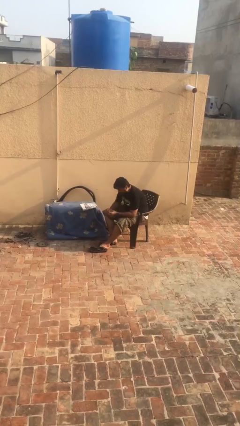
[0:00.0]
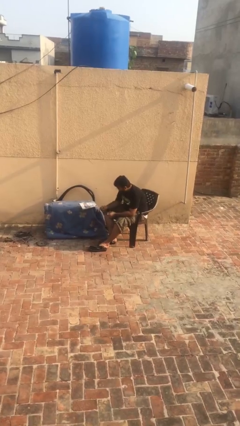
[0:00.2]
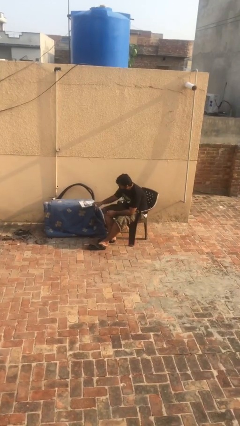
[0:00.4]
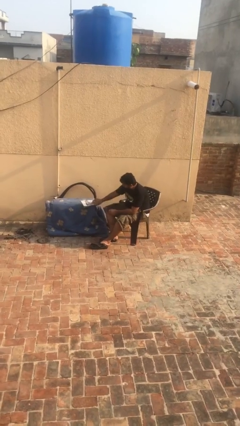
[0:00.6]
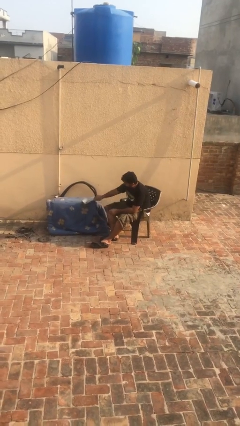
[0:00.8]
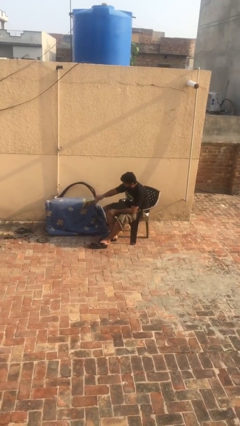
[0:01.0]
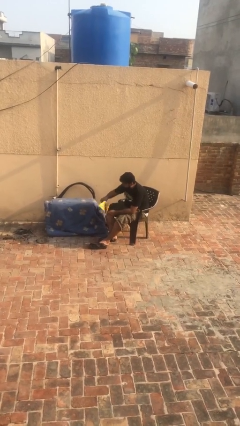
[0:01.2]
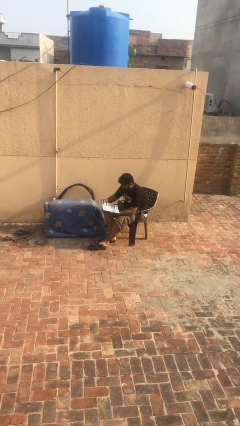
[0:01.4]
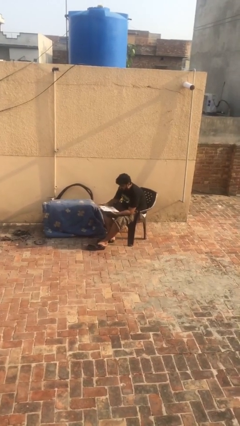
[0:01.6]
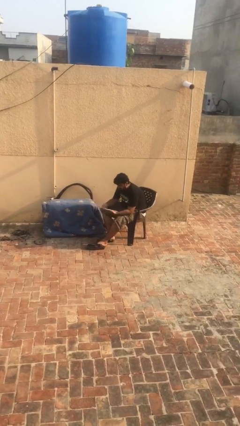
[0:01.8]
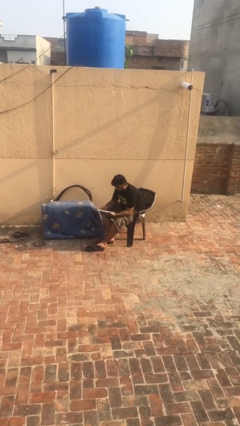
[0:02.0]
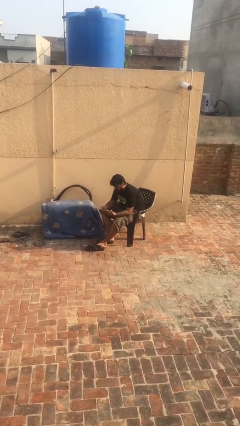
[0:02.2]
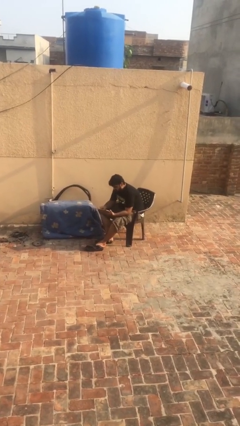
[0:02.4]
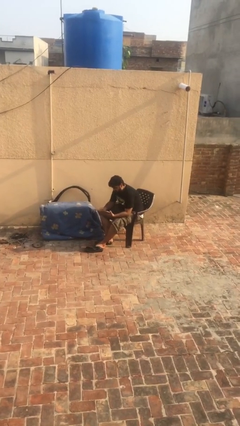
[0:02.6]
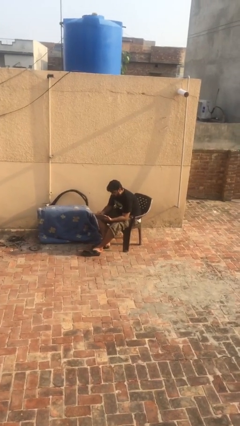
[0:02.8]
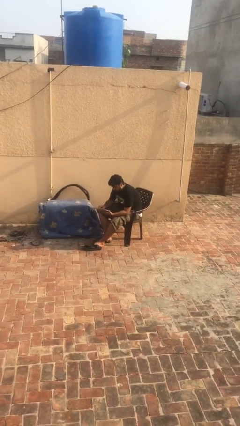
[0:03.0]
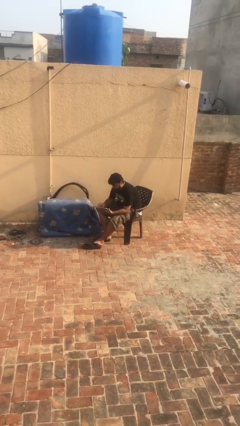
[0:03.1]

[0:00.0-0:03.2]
person picks up object from table

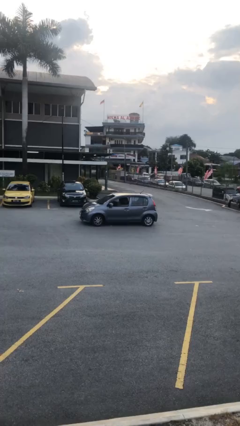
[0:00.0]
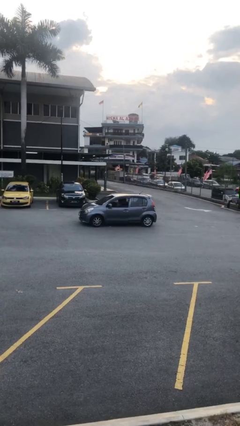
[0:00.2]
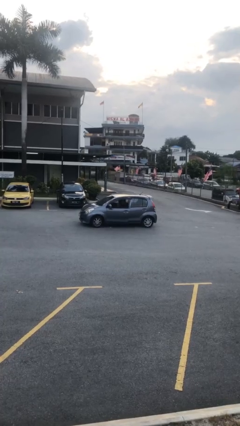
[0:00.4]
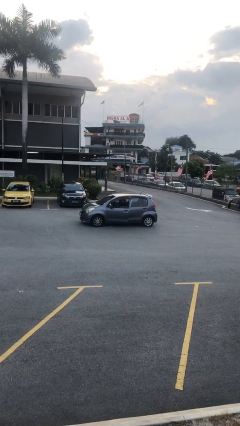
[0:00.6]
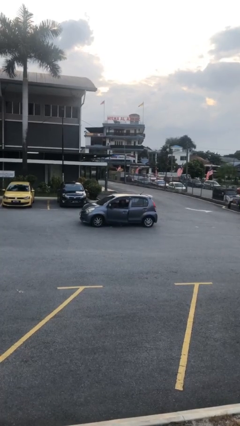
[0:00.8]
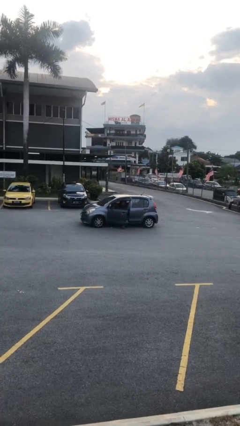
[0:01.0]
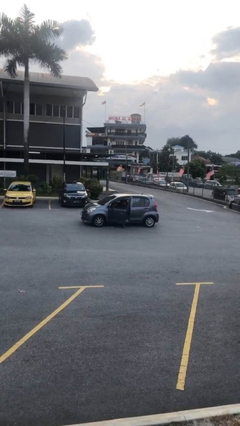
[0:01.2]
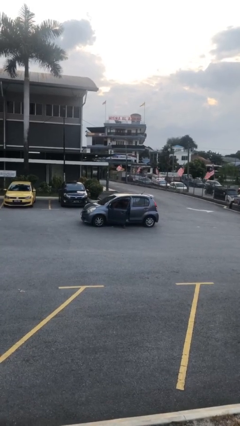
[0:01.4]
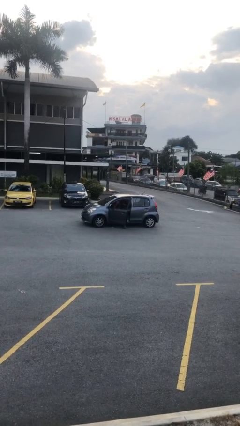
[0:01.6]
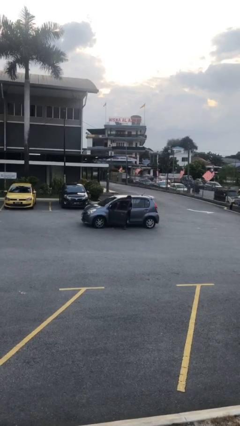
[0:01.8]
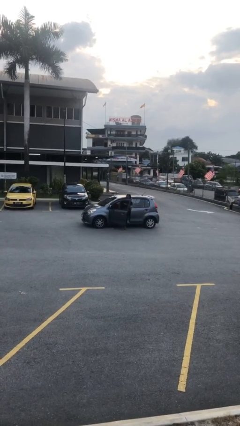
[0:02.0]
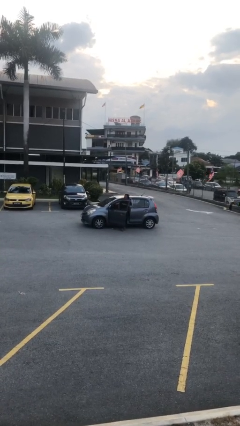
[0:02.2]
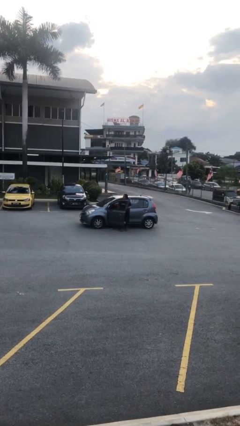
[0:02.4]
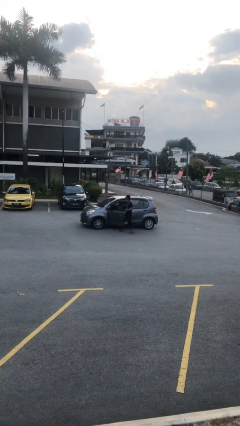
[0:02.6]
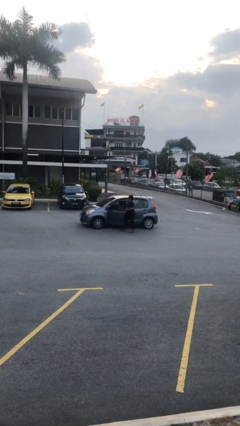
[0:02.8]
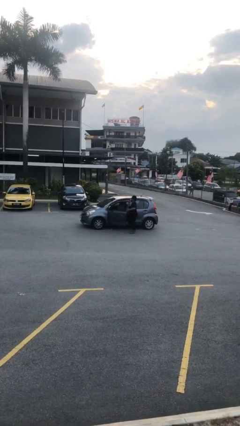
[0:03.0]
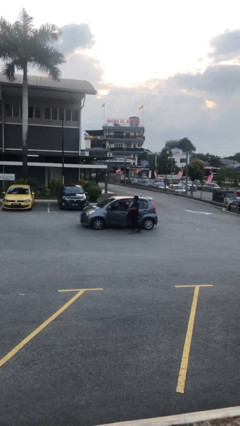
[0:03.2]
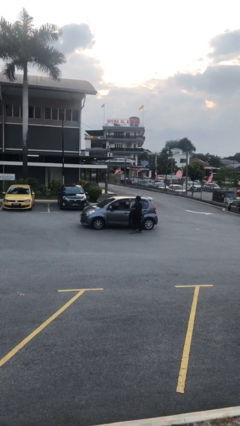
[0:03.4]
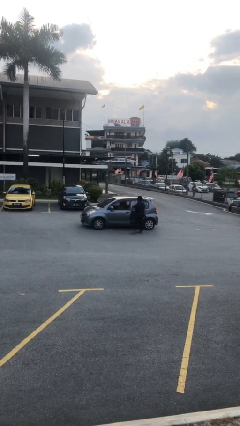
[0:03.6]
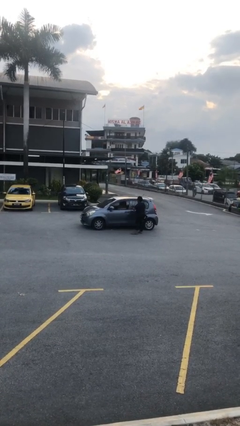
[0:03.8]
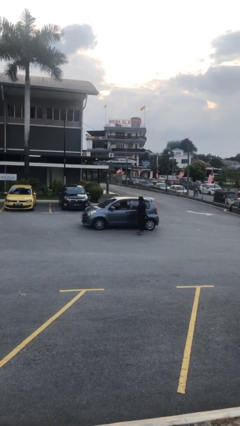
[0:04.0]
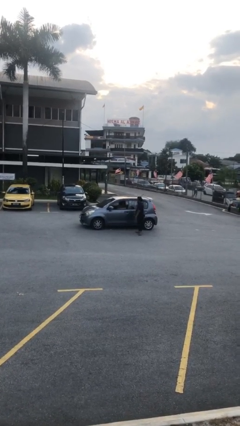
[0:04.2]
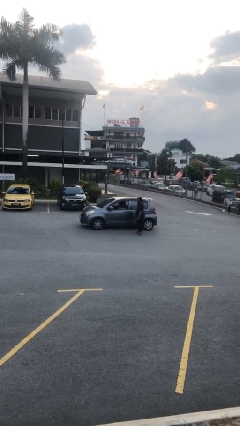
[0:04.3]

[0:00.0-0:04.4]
car drops off person

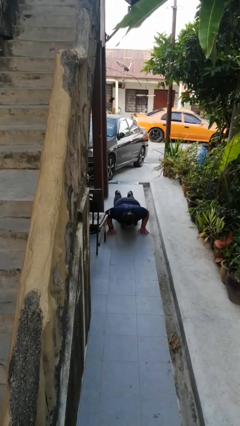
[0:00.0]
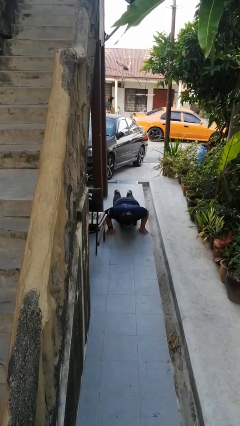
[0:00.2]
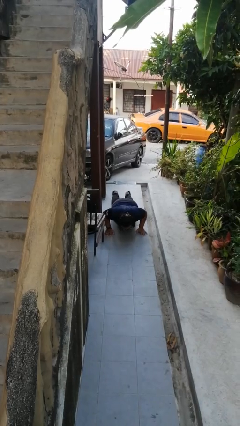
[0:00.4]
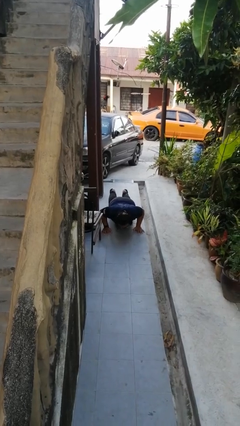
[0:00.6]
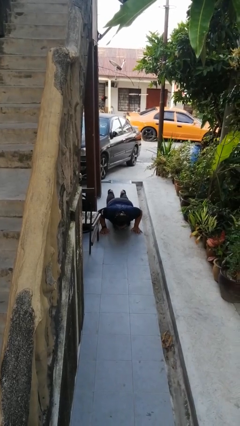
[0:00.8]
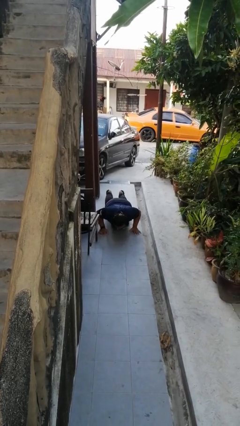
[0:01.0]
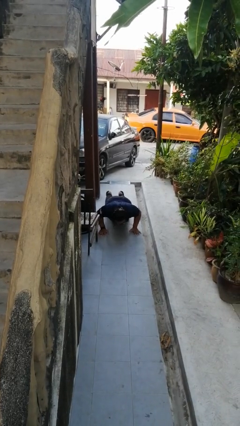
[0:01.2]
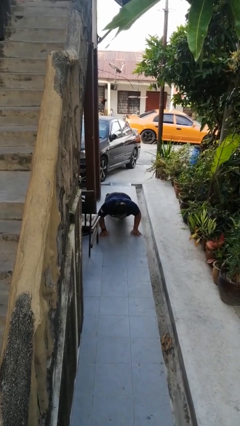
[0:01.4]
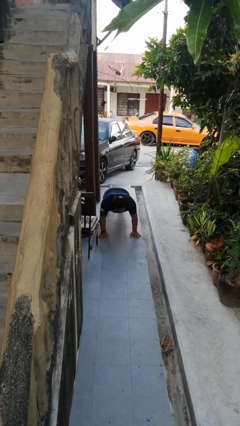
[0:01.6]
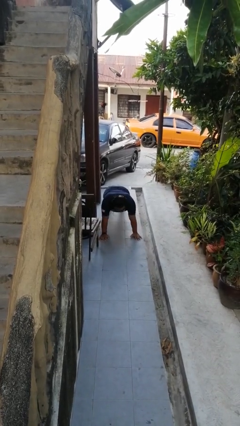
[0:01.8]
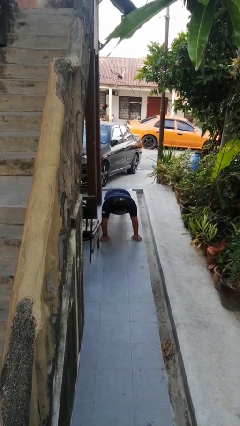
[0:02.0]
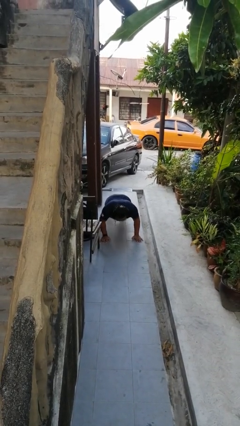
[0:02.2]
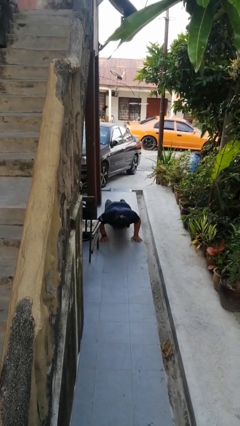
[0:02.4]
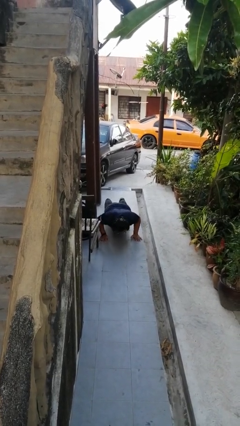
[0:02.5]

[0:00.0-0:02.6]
person exercises with pushup

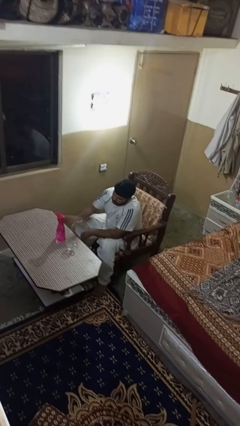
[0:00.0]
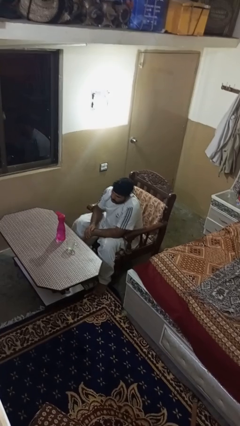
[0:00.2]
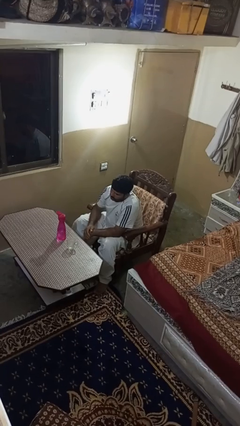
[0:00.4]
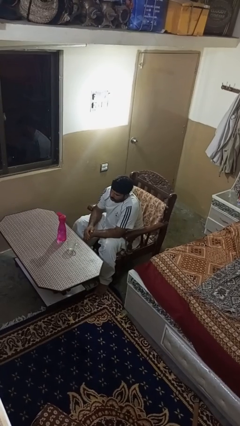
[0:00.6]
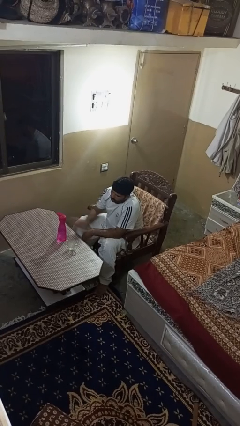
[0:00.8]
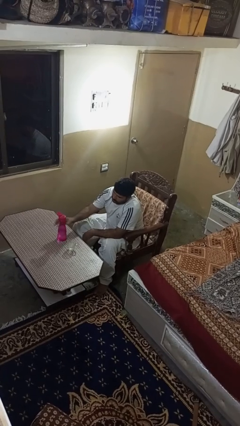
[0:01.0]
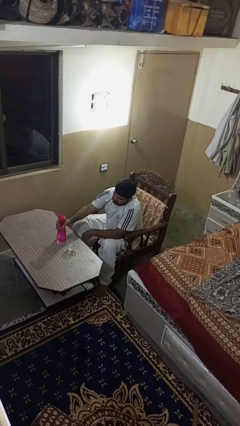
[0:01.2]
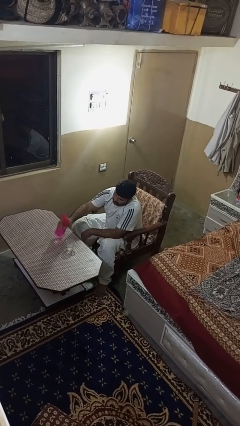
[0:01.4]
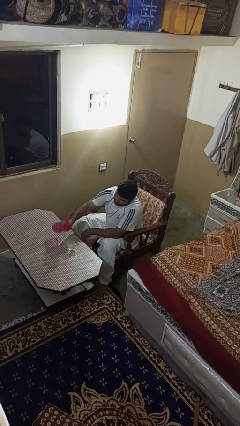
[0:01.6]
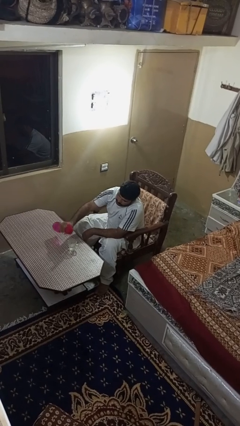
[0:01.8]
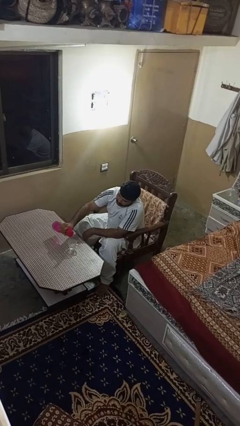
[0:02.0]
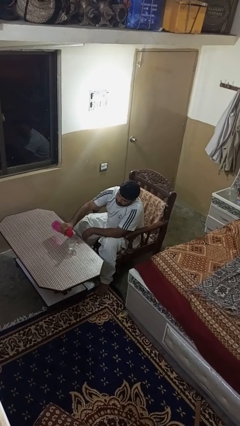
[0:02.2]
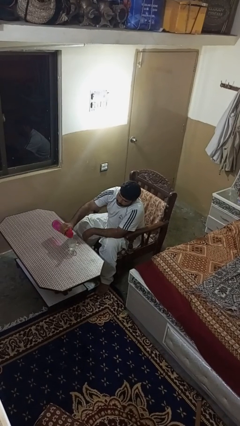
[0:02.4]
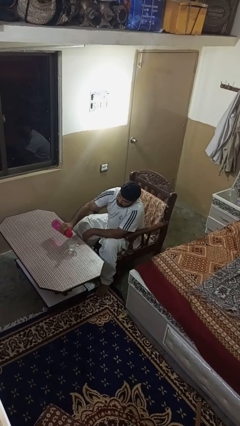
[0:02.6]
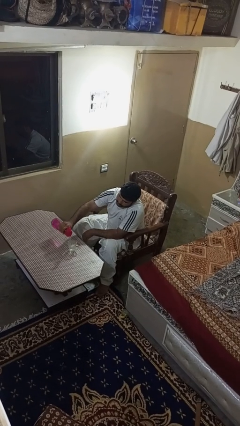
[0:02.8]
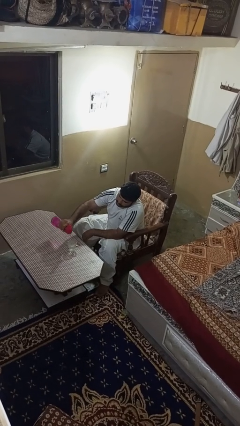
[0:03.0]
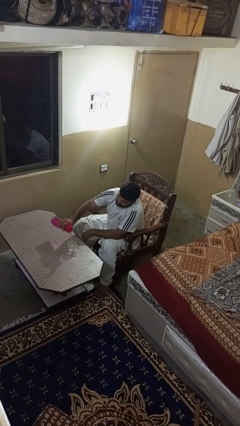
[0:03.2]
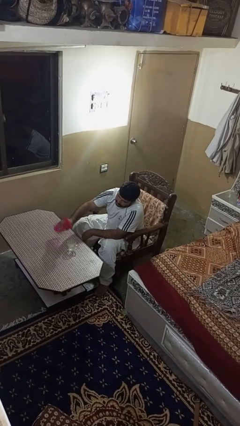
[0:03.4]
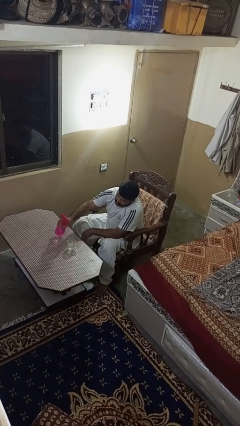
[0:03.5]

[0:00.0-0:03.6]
person pours liquid into cup

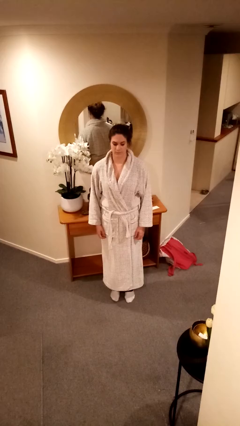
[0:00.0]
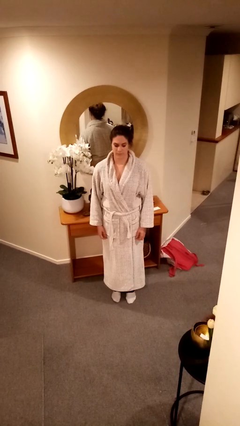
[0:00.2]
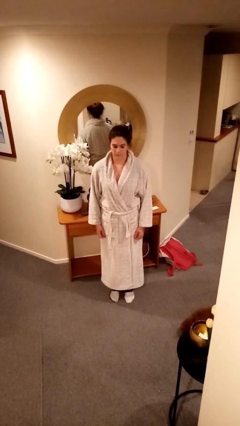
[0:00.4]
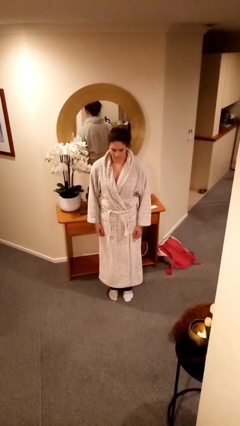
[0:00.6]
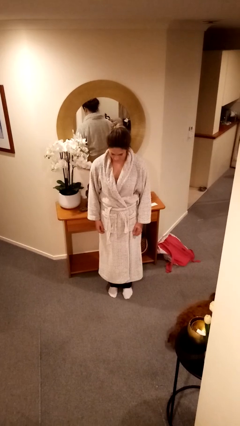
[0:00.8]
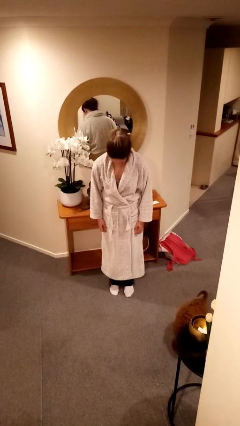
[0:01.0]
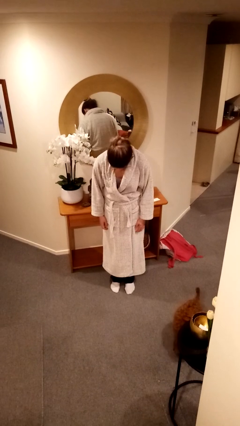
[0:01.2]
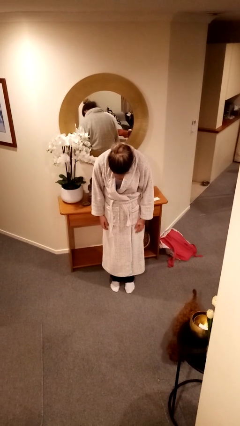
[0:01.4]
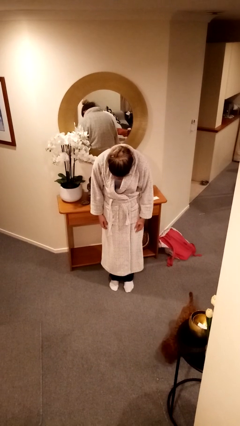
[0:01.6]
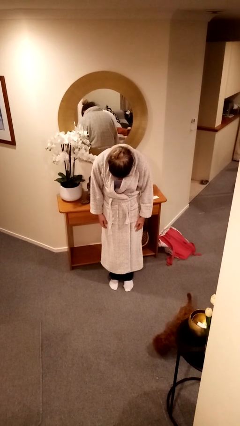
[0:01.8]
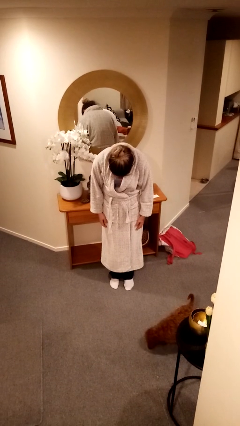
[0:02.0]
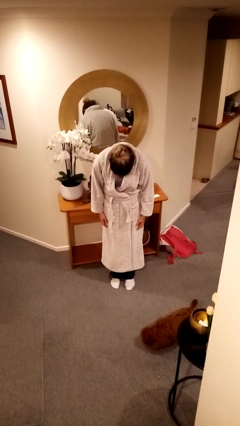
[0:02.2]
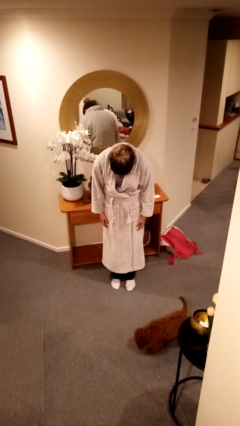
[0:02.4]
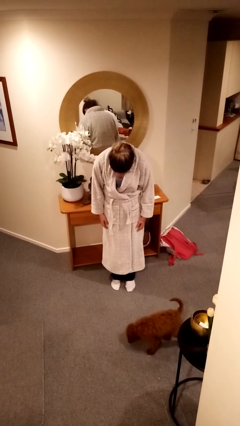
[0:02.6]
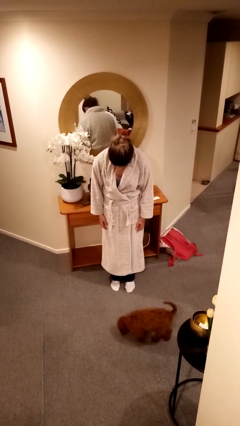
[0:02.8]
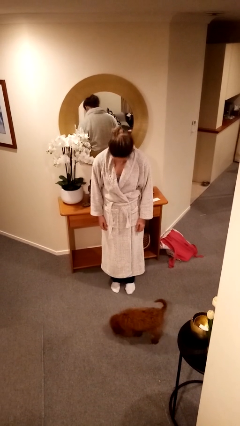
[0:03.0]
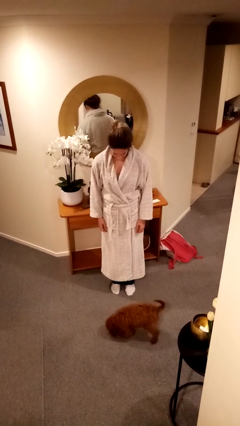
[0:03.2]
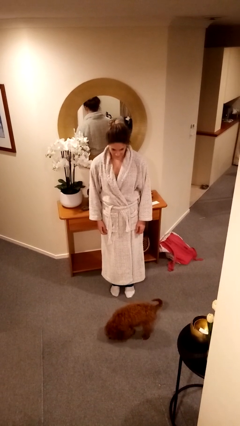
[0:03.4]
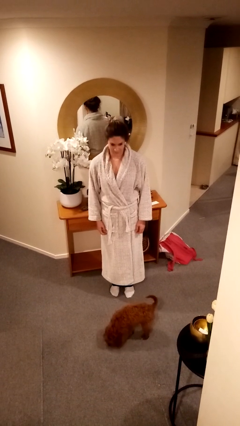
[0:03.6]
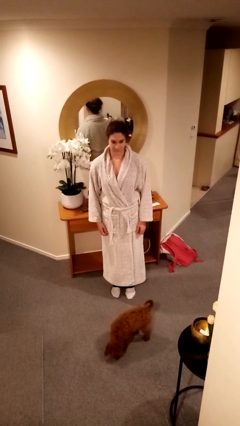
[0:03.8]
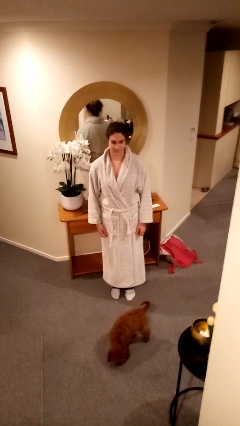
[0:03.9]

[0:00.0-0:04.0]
person bows
